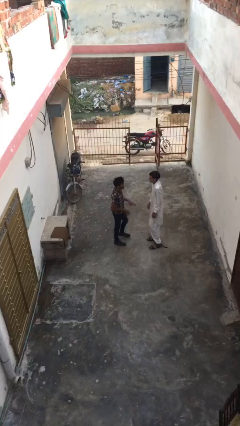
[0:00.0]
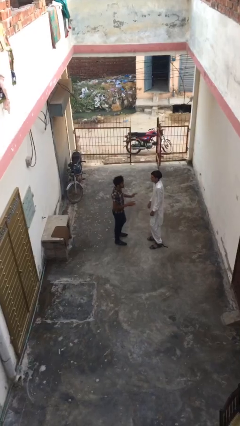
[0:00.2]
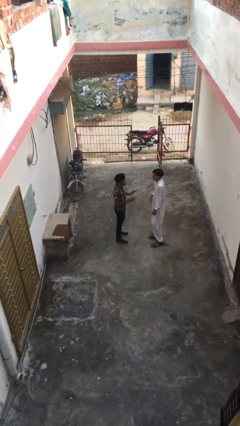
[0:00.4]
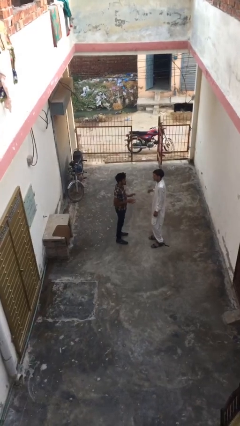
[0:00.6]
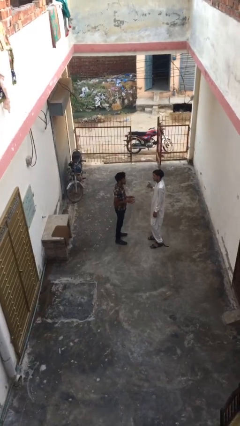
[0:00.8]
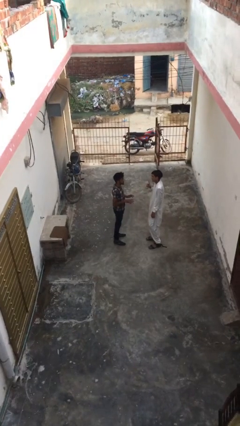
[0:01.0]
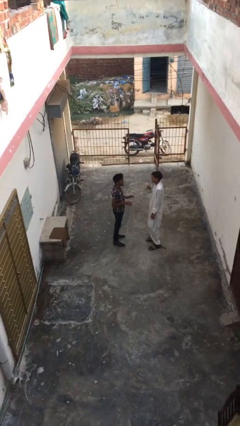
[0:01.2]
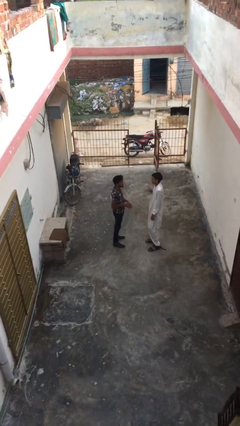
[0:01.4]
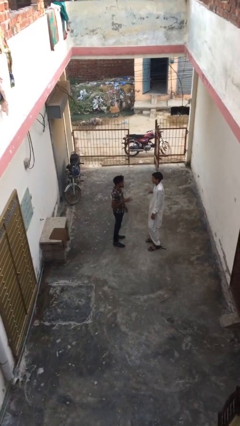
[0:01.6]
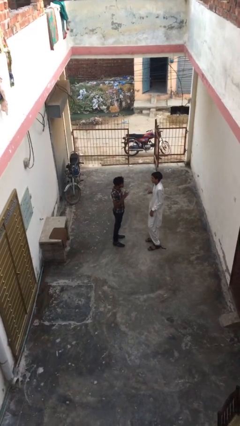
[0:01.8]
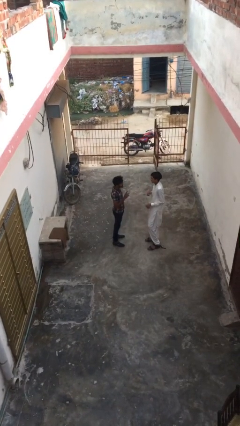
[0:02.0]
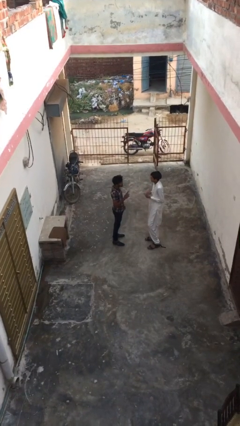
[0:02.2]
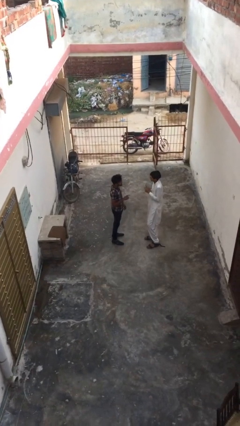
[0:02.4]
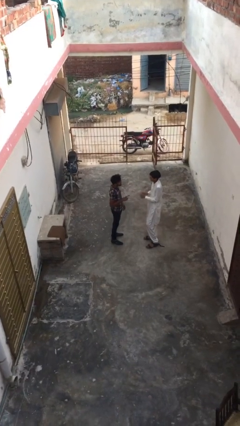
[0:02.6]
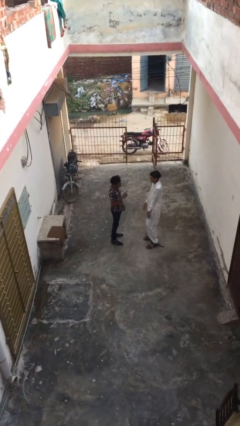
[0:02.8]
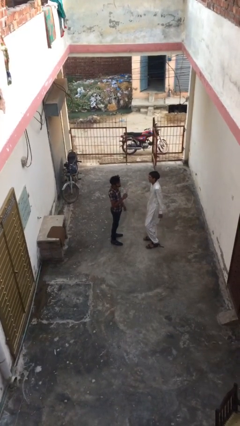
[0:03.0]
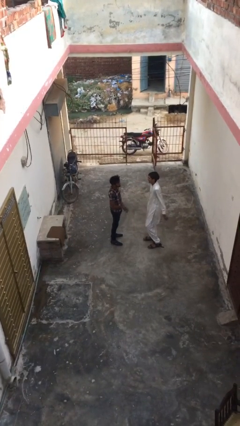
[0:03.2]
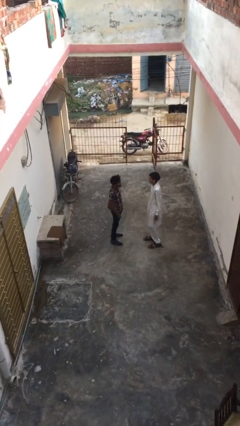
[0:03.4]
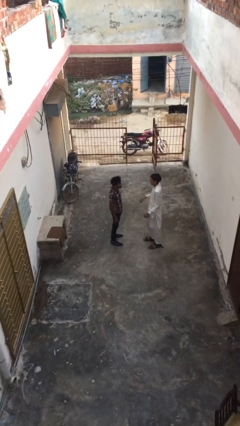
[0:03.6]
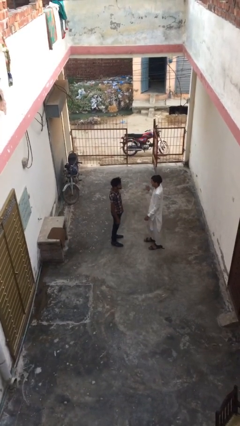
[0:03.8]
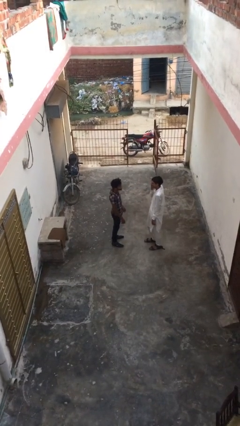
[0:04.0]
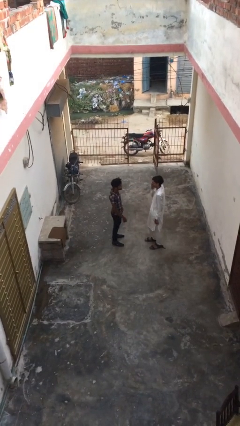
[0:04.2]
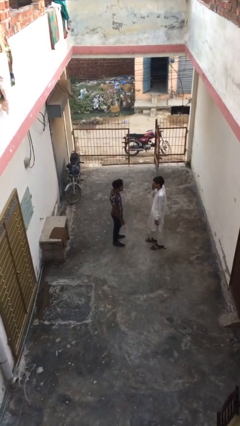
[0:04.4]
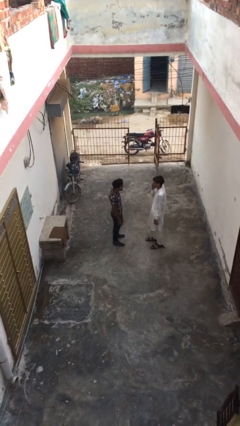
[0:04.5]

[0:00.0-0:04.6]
person talks to person

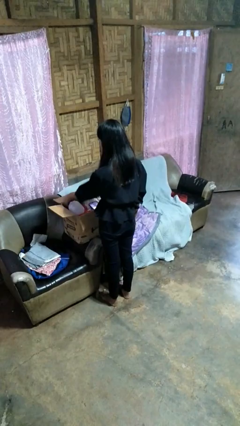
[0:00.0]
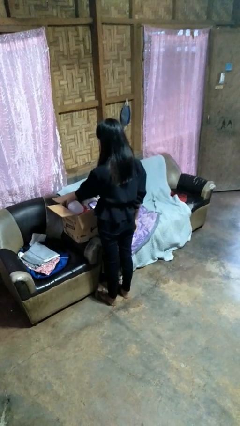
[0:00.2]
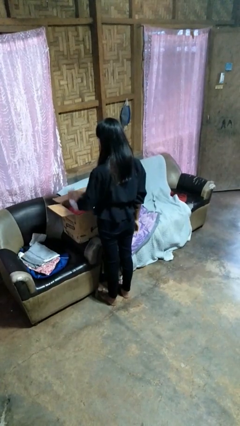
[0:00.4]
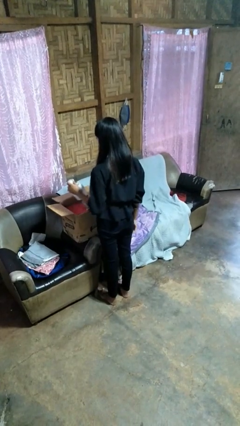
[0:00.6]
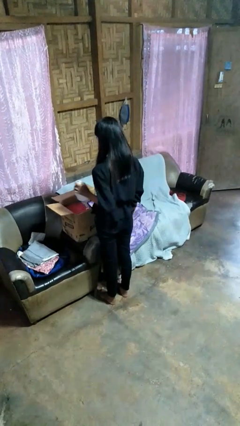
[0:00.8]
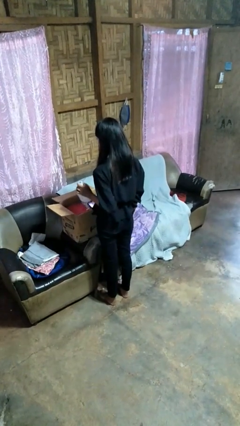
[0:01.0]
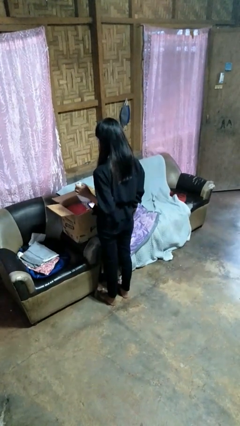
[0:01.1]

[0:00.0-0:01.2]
person takes object from box

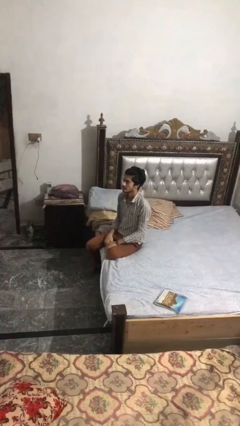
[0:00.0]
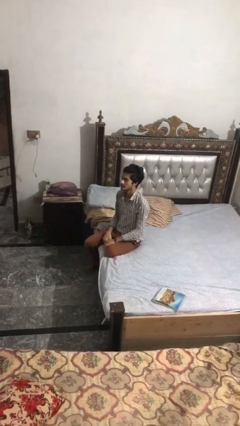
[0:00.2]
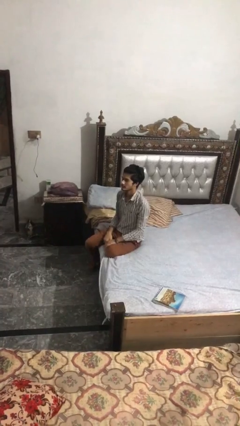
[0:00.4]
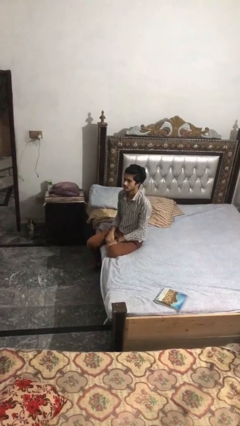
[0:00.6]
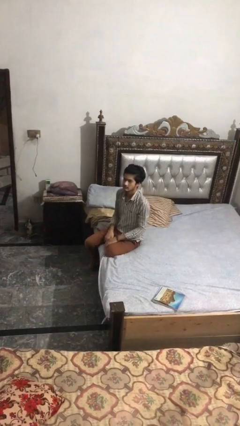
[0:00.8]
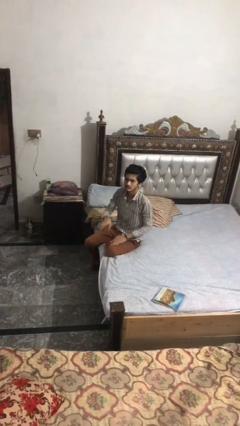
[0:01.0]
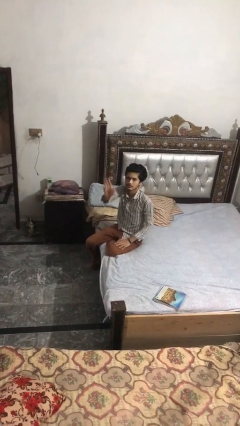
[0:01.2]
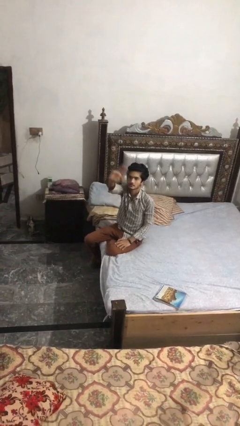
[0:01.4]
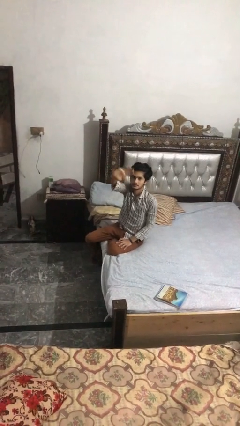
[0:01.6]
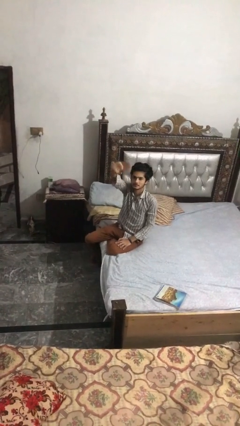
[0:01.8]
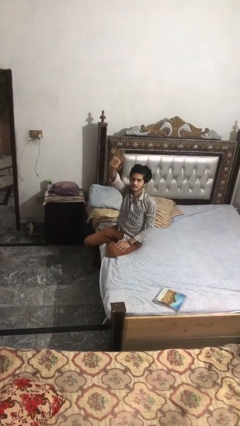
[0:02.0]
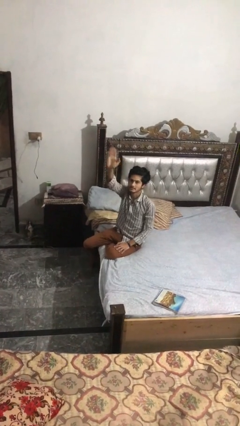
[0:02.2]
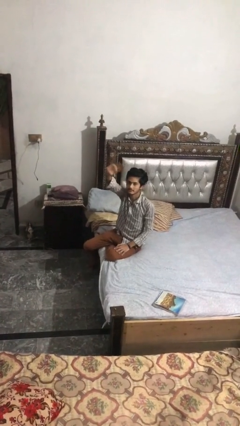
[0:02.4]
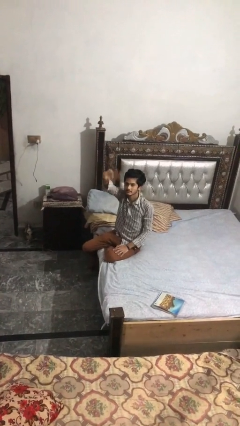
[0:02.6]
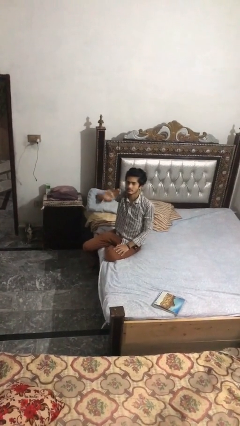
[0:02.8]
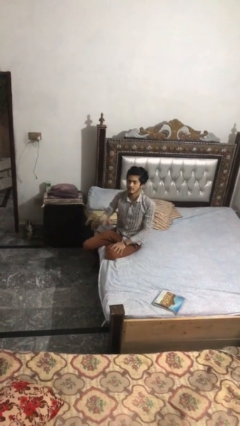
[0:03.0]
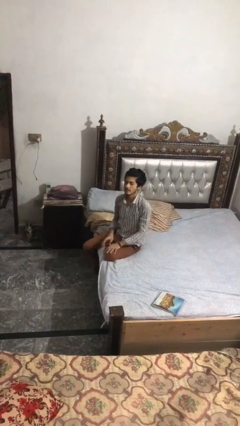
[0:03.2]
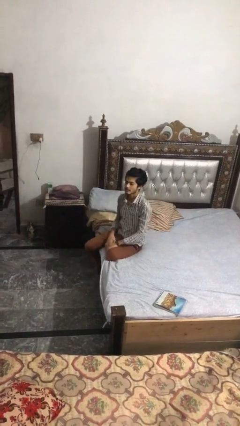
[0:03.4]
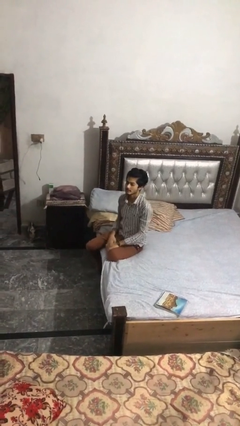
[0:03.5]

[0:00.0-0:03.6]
person waves at person

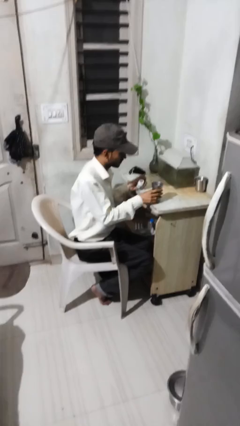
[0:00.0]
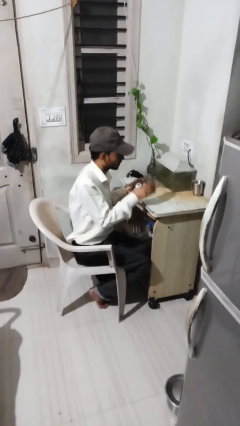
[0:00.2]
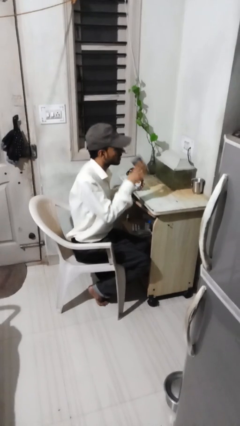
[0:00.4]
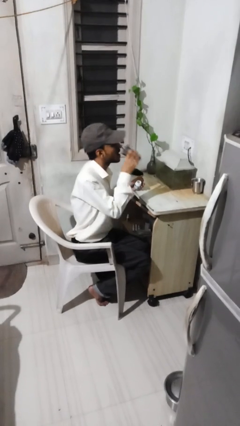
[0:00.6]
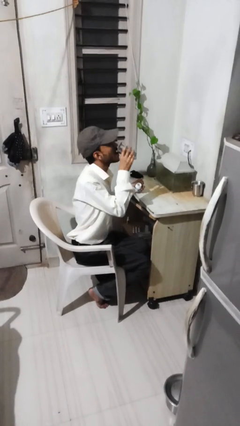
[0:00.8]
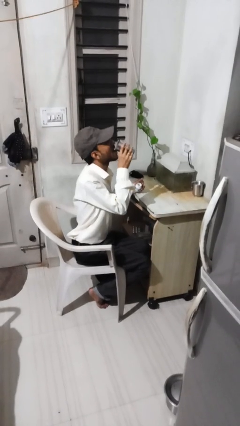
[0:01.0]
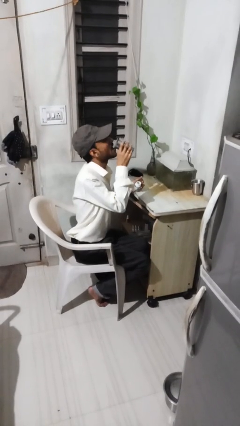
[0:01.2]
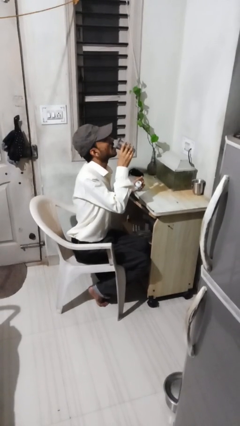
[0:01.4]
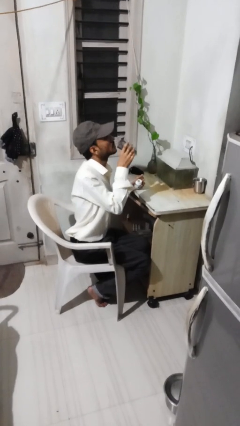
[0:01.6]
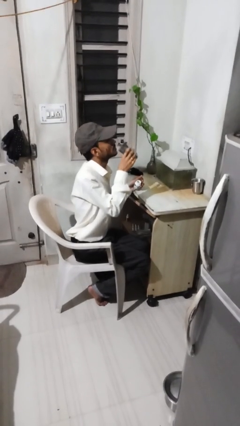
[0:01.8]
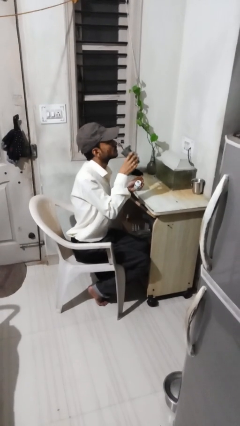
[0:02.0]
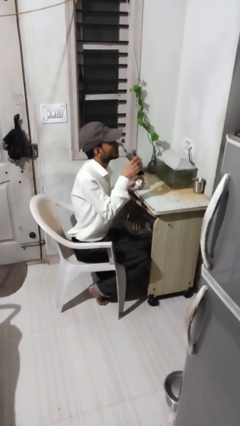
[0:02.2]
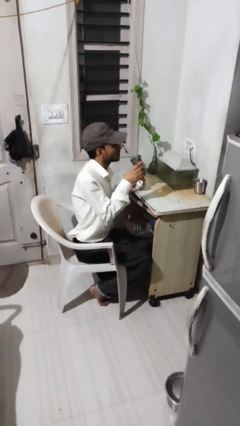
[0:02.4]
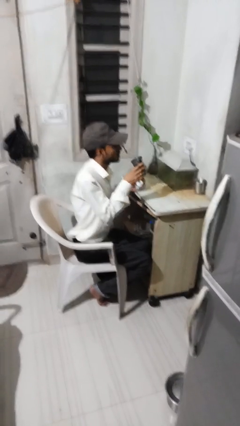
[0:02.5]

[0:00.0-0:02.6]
person drinks from cup

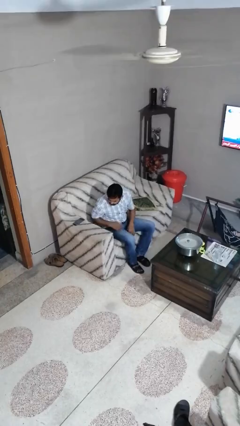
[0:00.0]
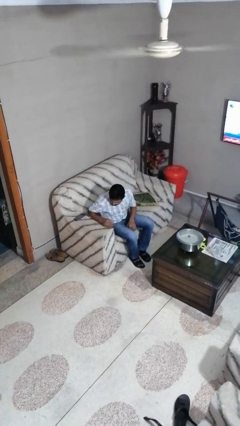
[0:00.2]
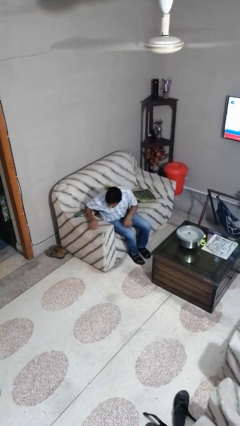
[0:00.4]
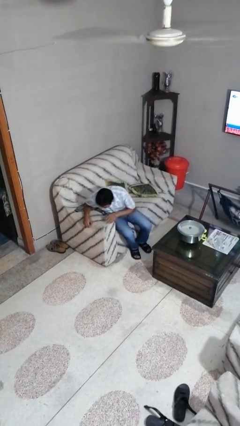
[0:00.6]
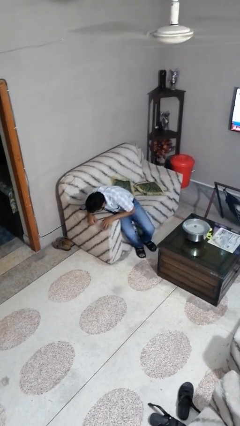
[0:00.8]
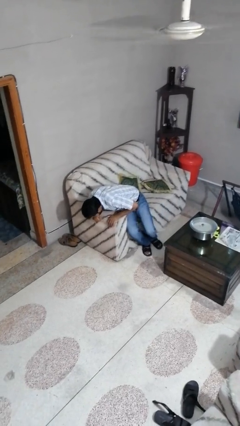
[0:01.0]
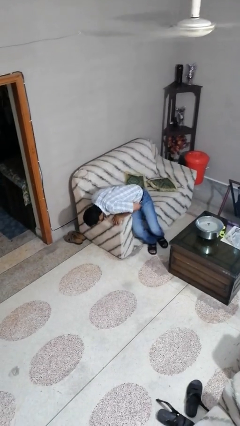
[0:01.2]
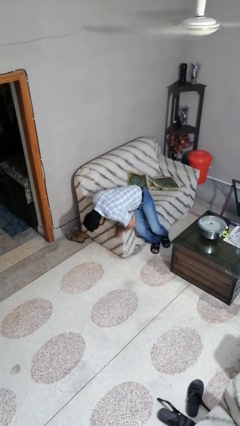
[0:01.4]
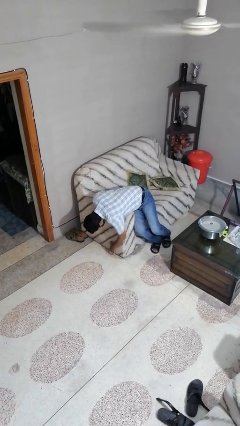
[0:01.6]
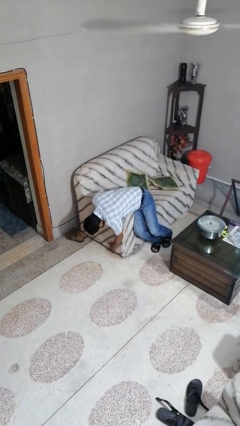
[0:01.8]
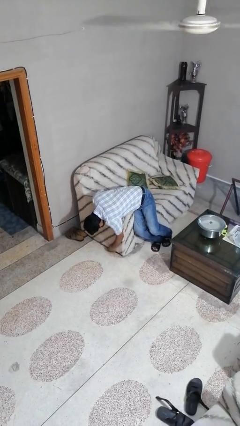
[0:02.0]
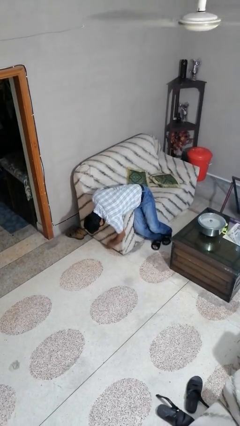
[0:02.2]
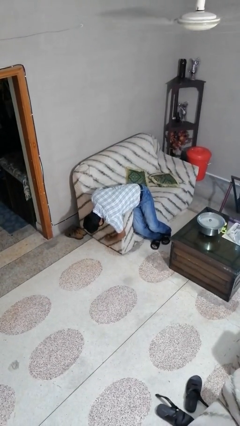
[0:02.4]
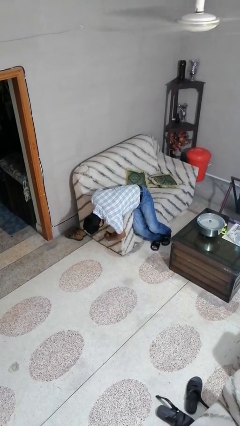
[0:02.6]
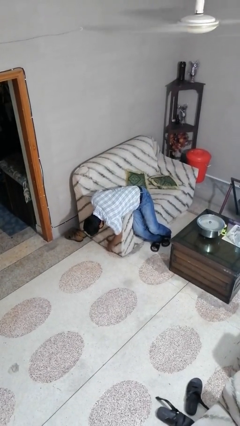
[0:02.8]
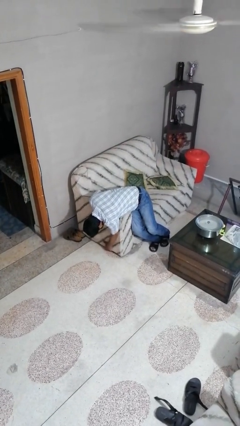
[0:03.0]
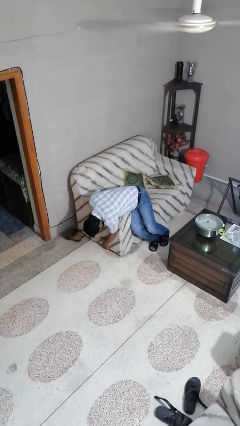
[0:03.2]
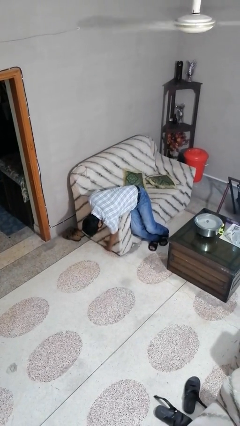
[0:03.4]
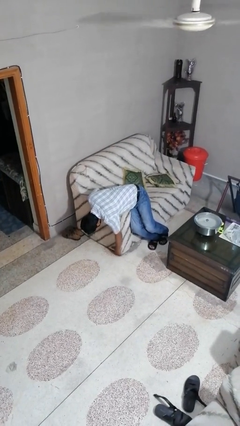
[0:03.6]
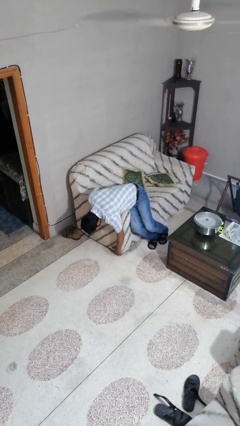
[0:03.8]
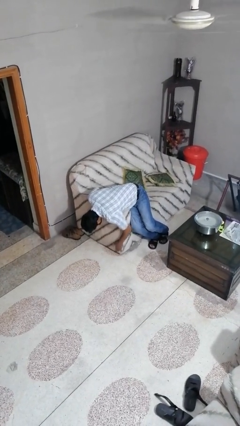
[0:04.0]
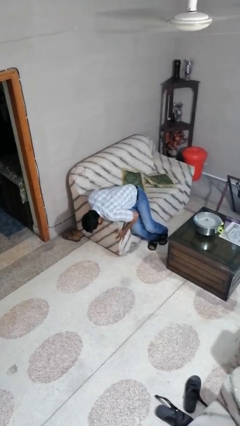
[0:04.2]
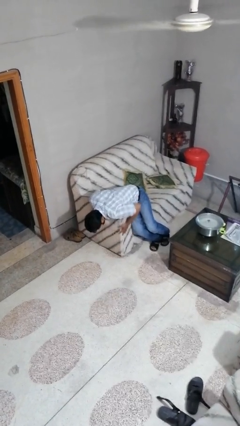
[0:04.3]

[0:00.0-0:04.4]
person searches under couch

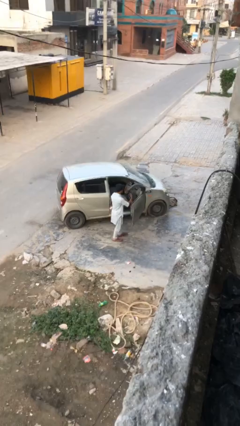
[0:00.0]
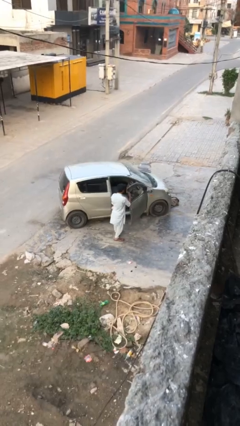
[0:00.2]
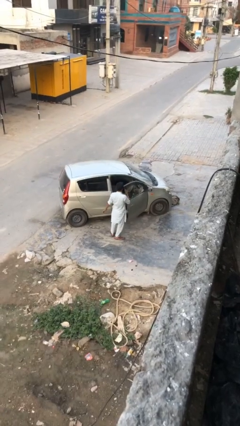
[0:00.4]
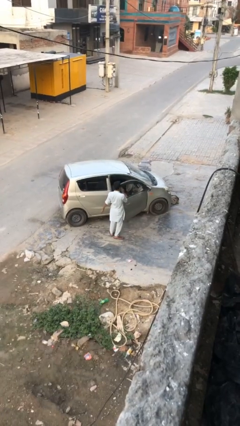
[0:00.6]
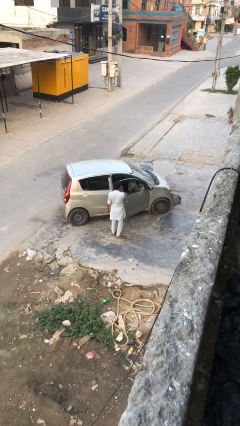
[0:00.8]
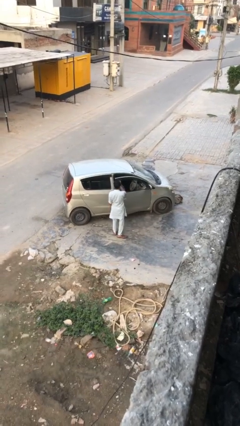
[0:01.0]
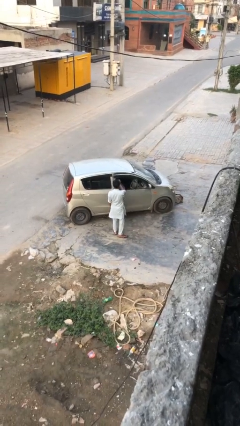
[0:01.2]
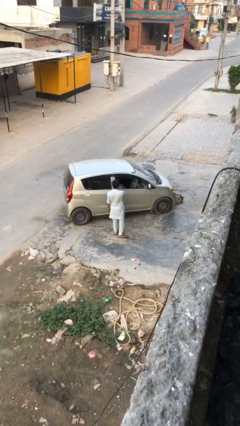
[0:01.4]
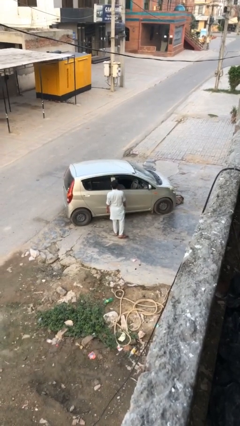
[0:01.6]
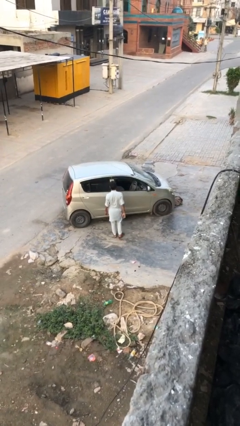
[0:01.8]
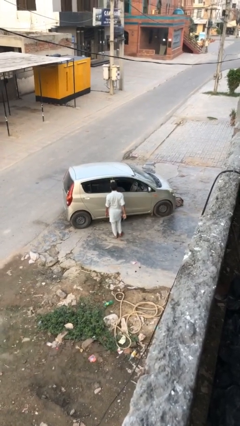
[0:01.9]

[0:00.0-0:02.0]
person closes car door
